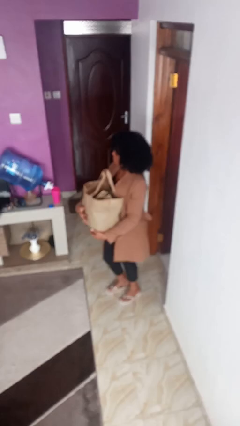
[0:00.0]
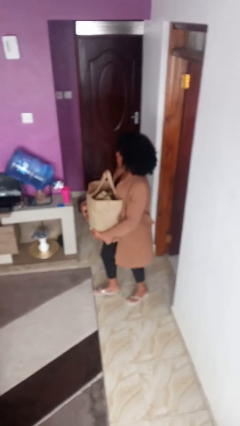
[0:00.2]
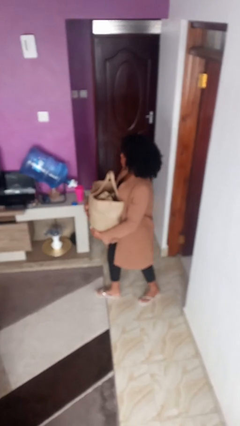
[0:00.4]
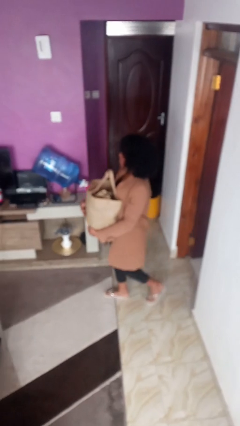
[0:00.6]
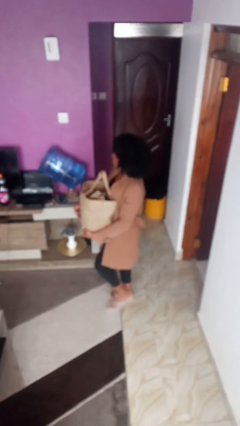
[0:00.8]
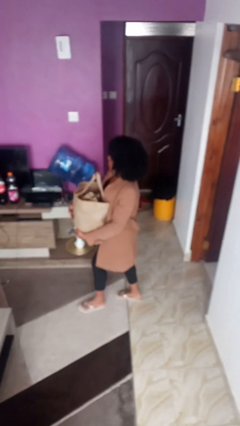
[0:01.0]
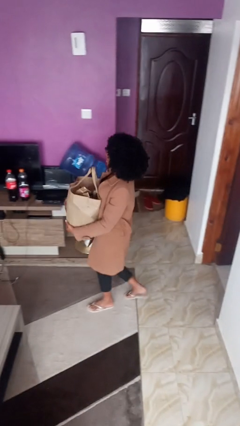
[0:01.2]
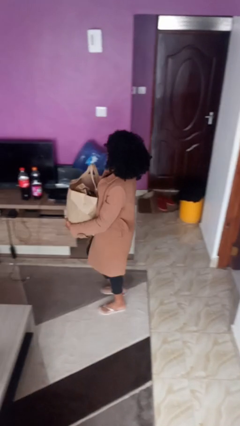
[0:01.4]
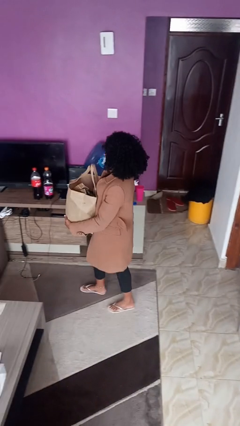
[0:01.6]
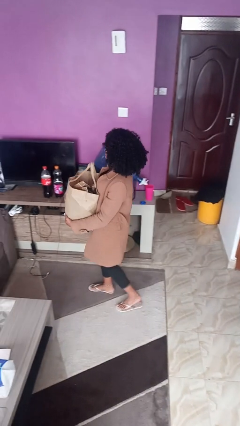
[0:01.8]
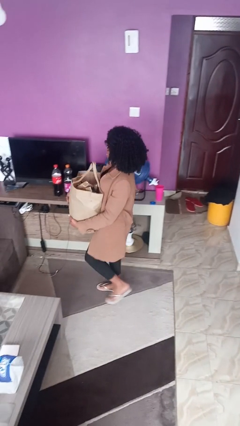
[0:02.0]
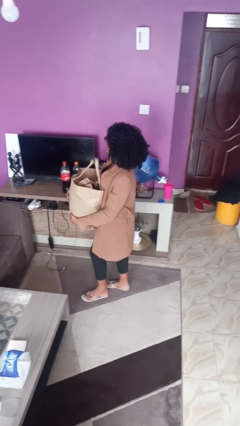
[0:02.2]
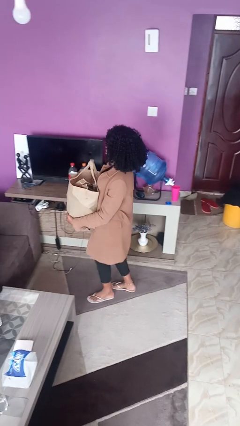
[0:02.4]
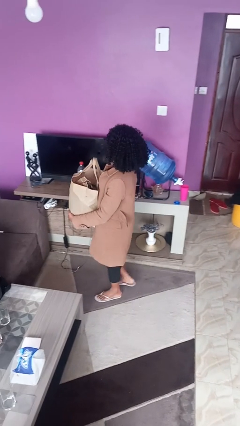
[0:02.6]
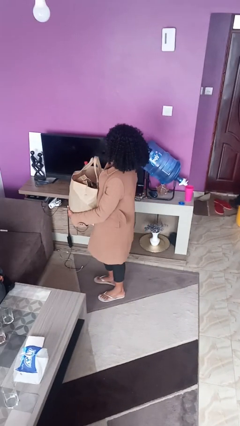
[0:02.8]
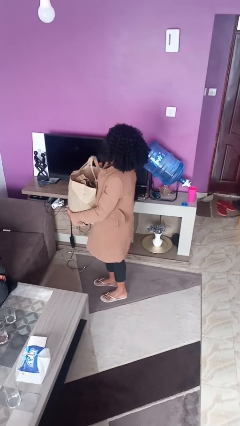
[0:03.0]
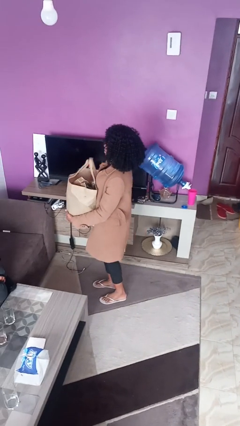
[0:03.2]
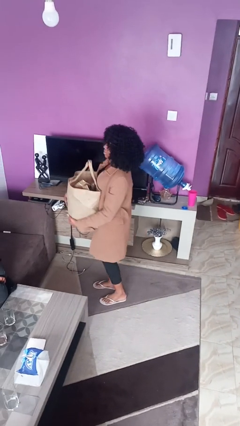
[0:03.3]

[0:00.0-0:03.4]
person carries groceries

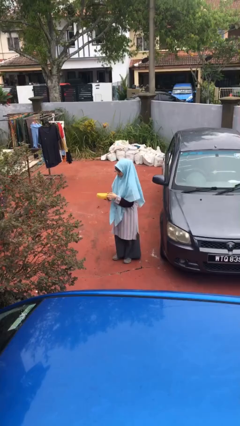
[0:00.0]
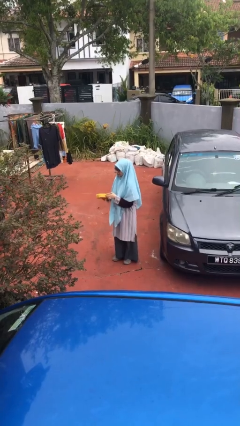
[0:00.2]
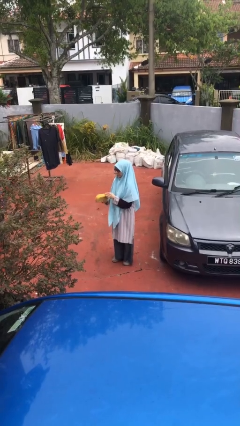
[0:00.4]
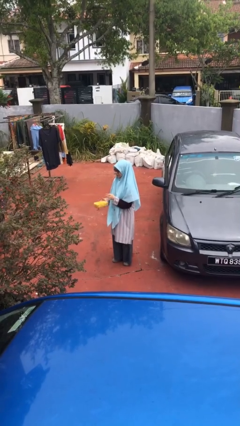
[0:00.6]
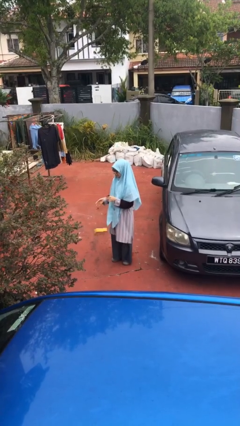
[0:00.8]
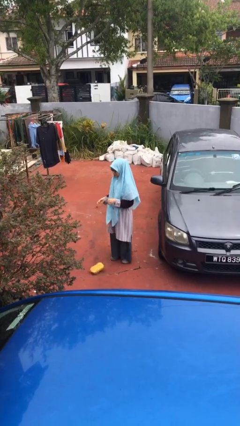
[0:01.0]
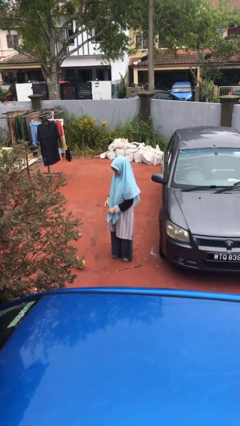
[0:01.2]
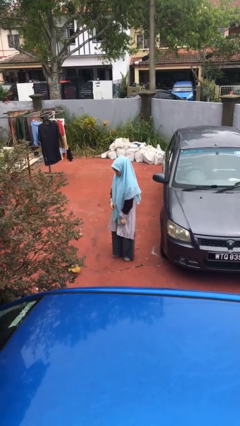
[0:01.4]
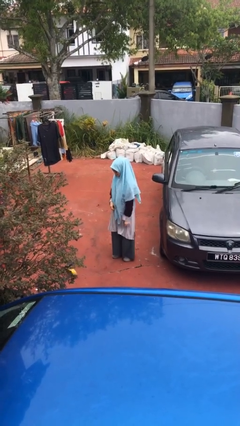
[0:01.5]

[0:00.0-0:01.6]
person drops object

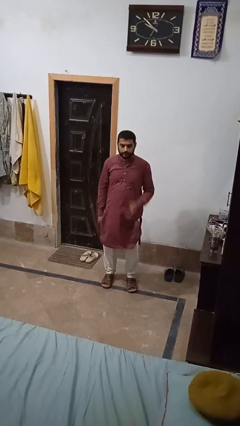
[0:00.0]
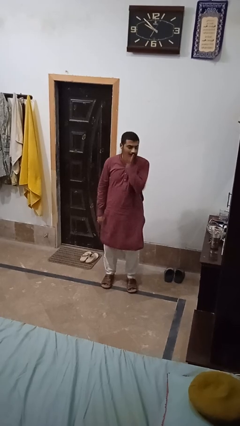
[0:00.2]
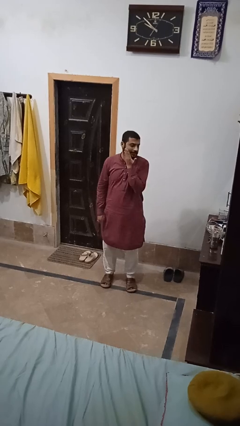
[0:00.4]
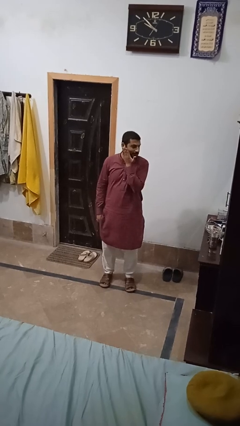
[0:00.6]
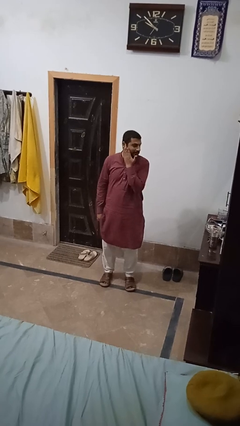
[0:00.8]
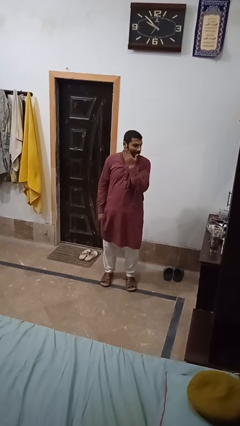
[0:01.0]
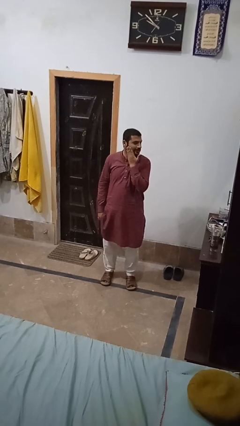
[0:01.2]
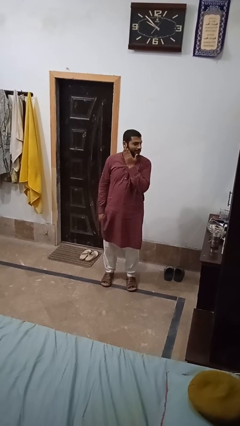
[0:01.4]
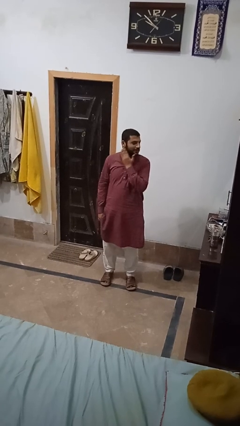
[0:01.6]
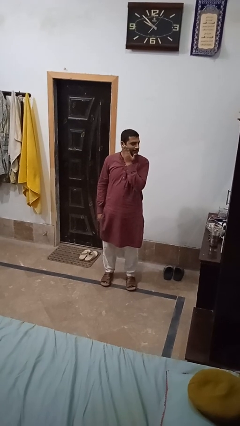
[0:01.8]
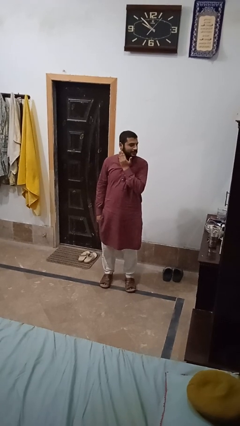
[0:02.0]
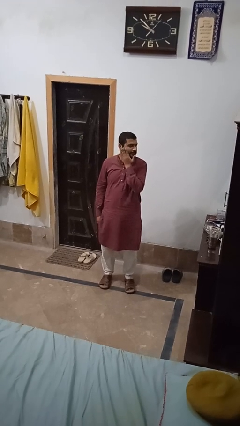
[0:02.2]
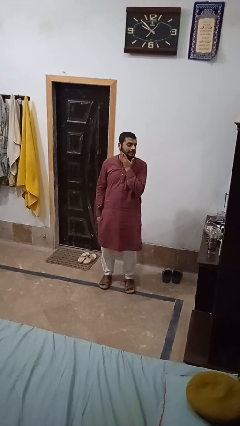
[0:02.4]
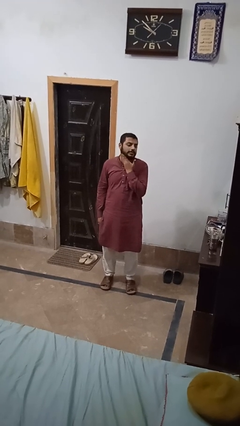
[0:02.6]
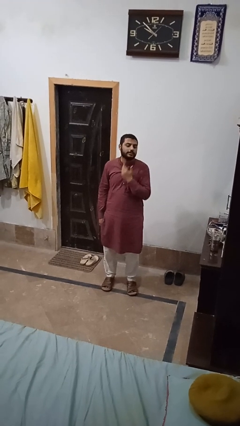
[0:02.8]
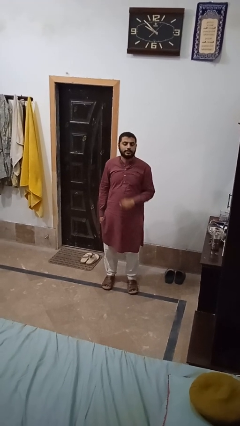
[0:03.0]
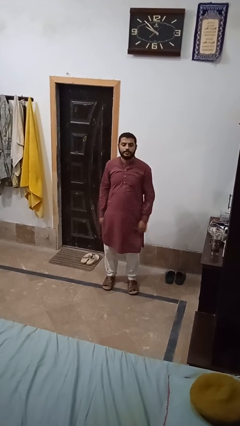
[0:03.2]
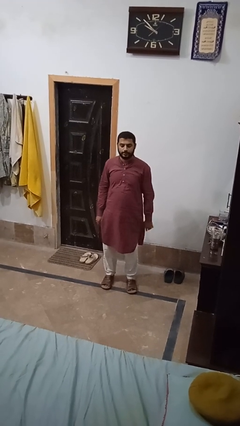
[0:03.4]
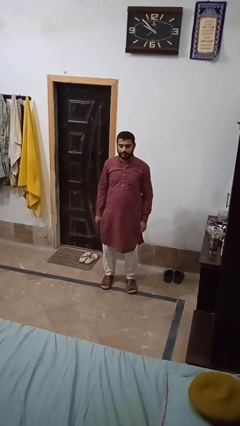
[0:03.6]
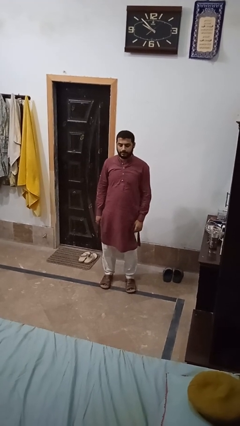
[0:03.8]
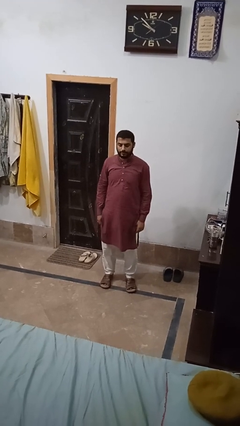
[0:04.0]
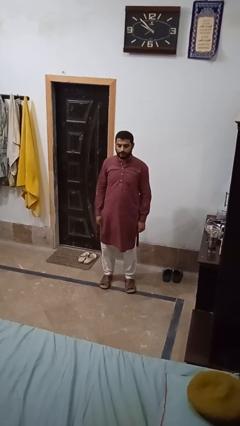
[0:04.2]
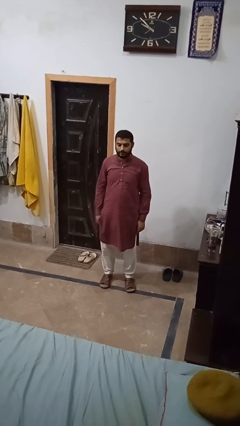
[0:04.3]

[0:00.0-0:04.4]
person swats bug

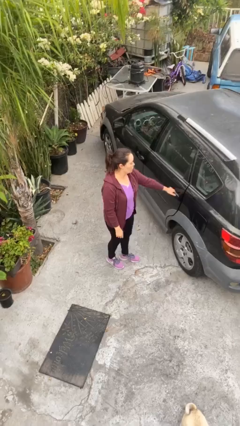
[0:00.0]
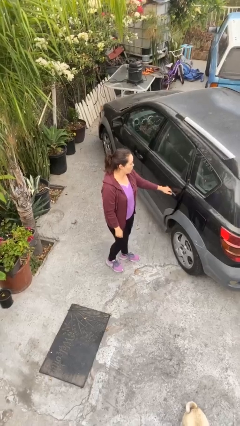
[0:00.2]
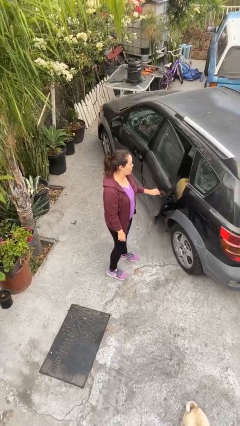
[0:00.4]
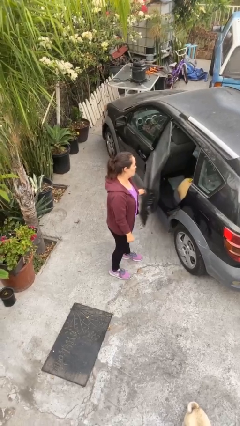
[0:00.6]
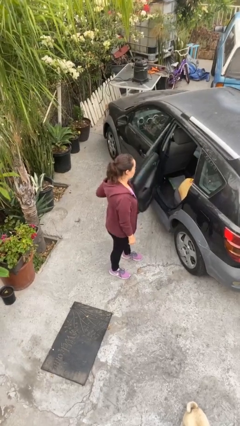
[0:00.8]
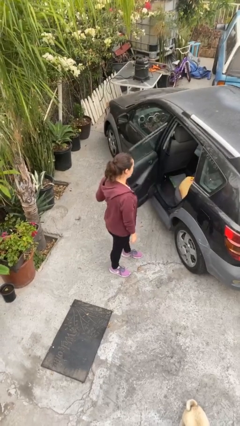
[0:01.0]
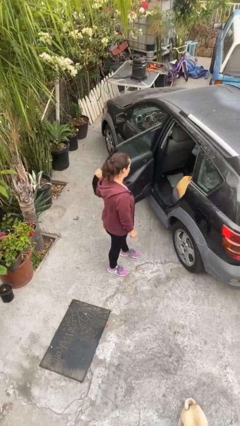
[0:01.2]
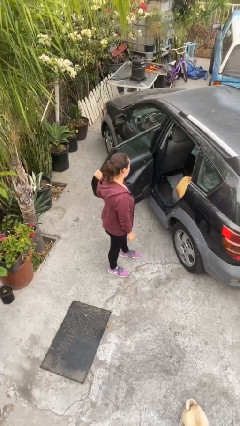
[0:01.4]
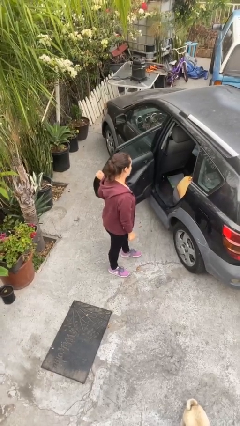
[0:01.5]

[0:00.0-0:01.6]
person opens car door

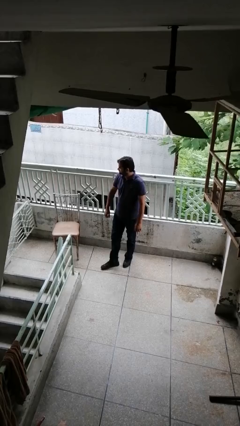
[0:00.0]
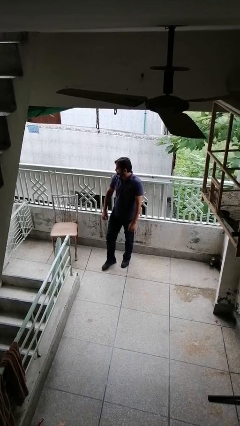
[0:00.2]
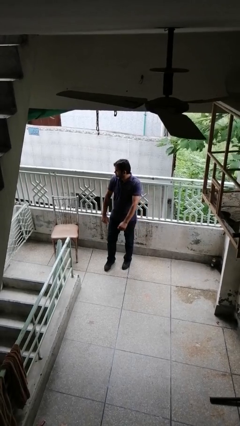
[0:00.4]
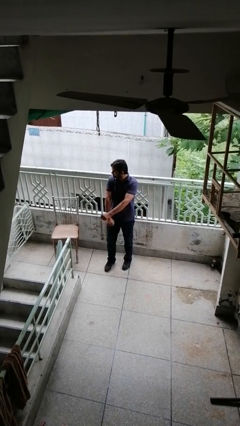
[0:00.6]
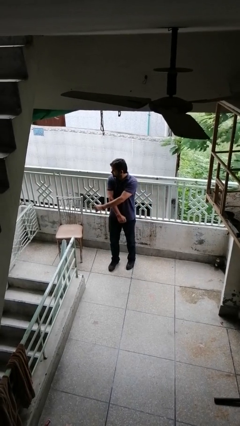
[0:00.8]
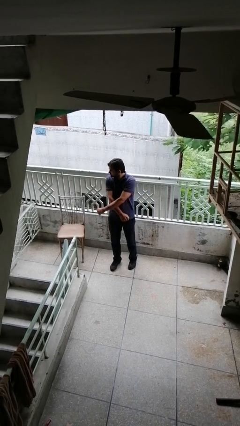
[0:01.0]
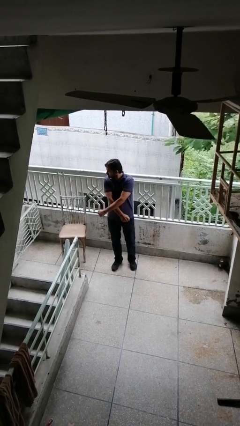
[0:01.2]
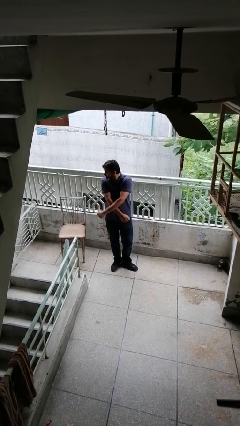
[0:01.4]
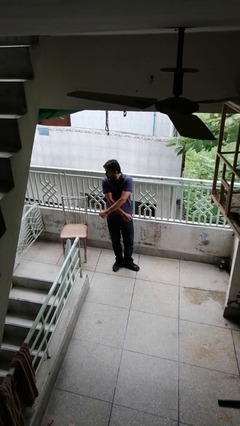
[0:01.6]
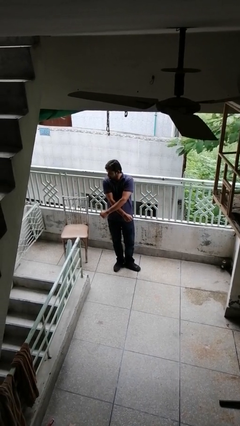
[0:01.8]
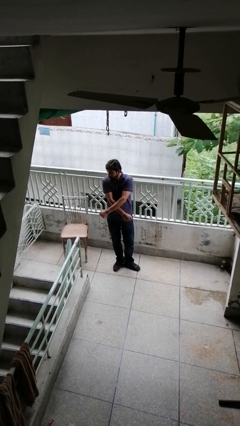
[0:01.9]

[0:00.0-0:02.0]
person gestures arms x

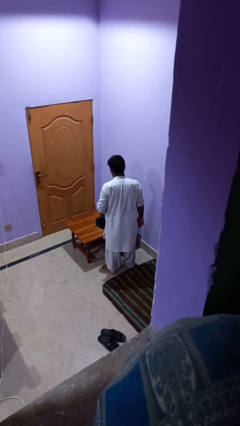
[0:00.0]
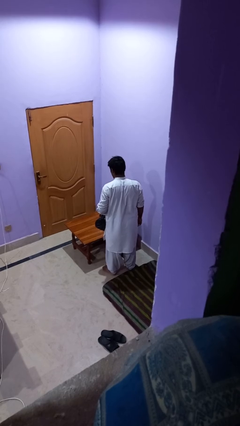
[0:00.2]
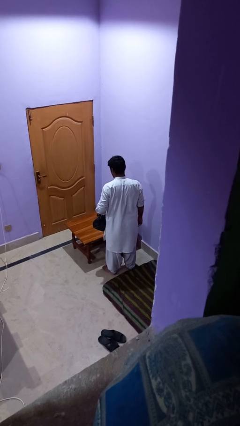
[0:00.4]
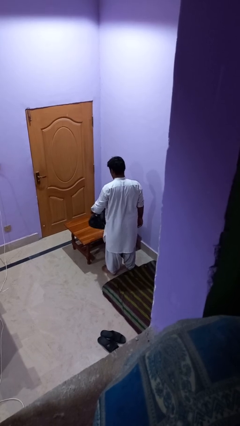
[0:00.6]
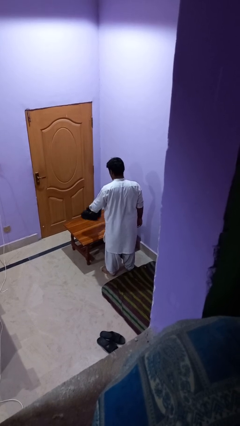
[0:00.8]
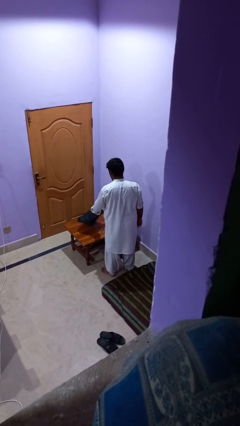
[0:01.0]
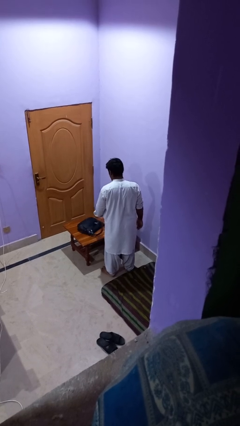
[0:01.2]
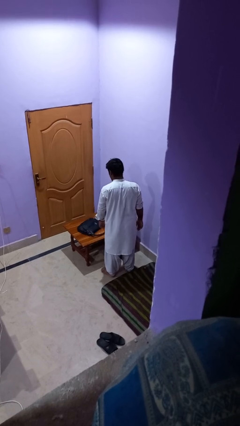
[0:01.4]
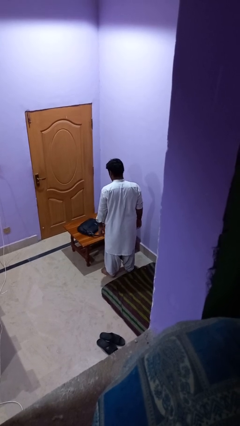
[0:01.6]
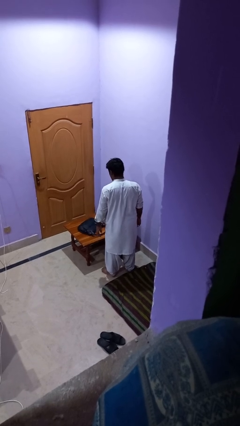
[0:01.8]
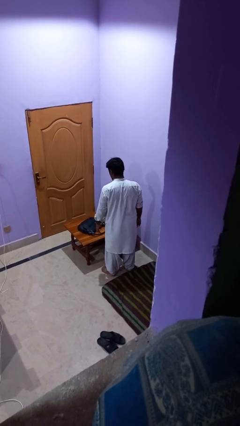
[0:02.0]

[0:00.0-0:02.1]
person throws object on table

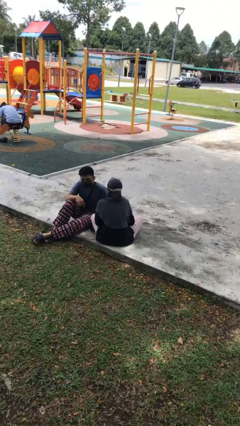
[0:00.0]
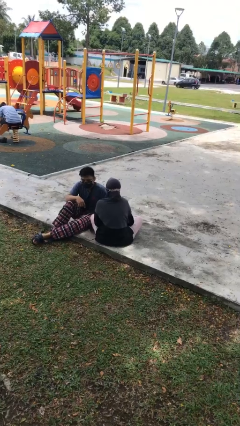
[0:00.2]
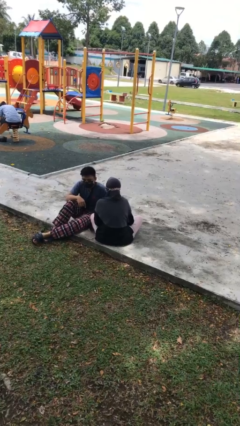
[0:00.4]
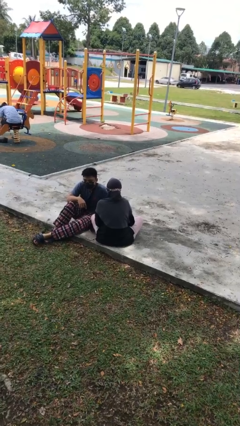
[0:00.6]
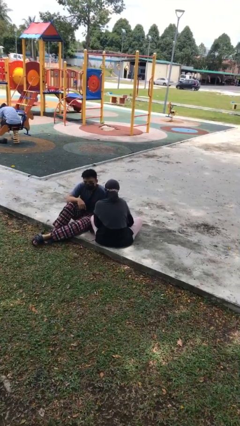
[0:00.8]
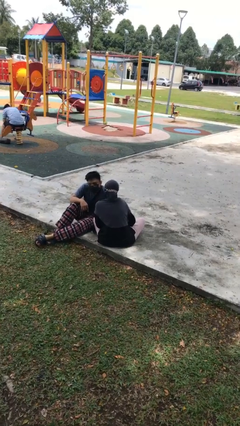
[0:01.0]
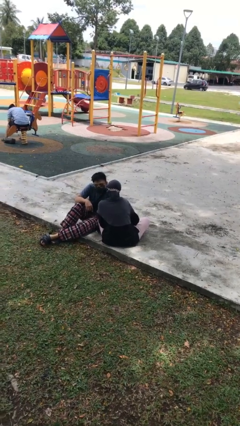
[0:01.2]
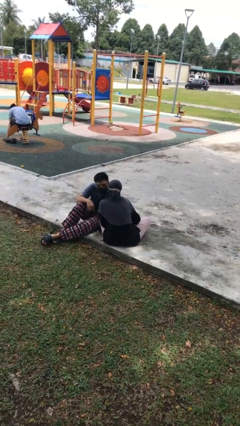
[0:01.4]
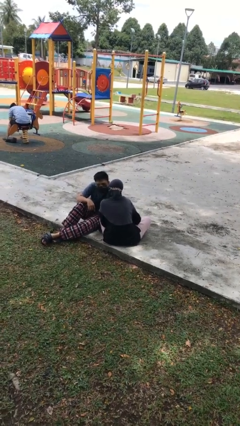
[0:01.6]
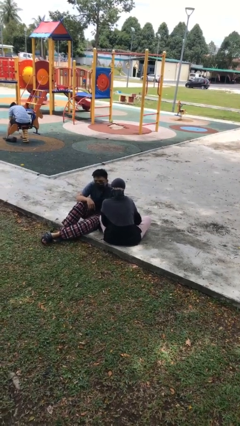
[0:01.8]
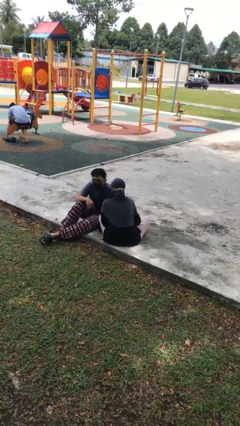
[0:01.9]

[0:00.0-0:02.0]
person kisses cheek of person
